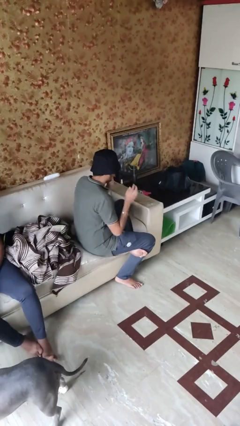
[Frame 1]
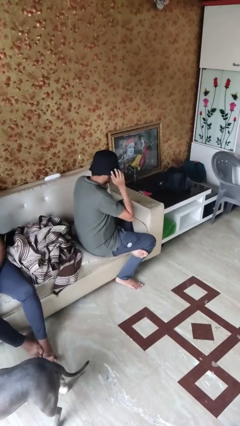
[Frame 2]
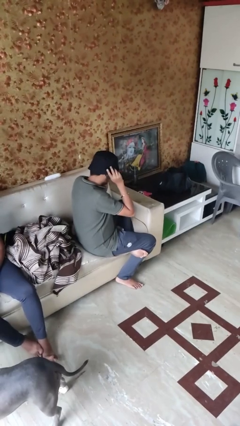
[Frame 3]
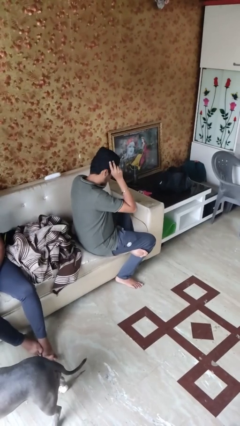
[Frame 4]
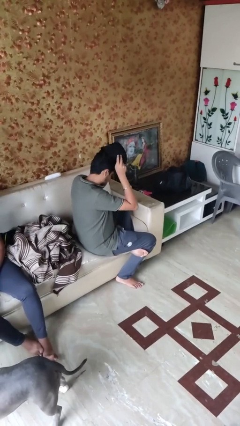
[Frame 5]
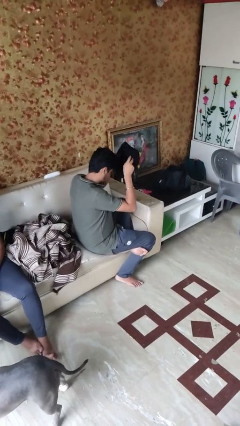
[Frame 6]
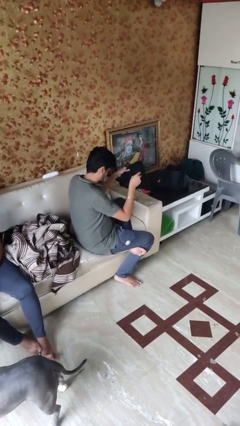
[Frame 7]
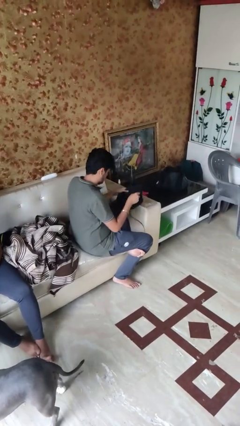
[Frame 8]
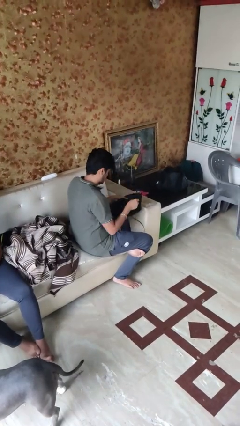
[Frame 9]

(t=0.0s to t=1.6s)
person takes off hat

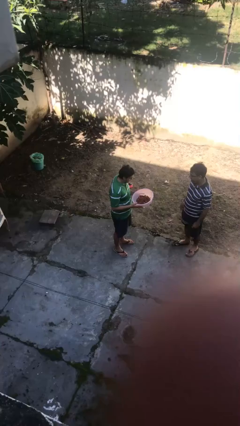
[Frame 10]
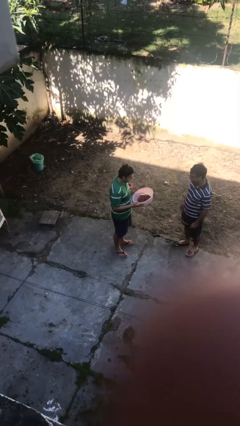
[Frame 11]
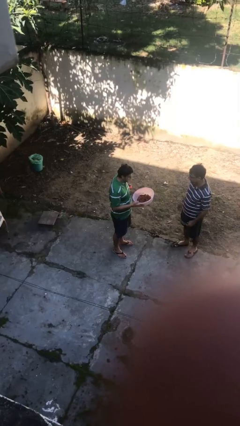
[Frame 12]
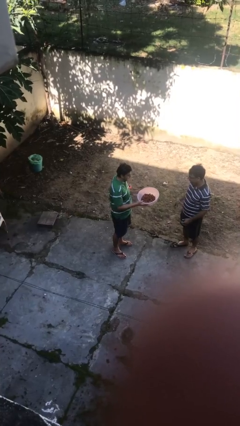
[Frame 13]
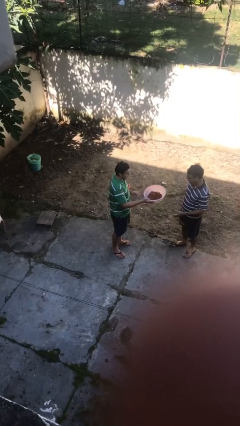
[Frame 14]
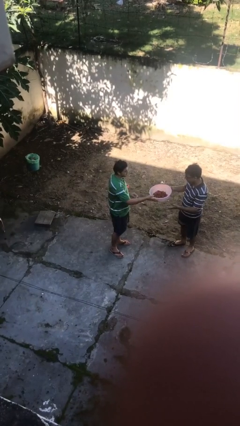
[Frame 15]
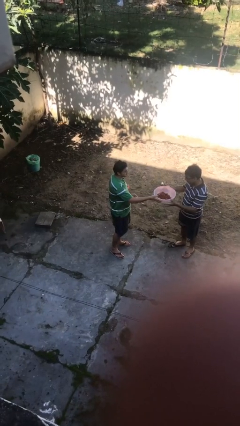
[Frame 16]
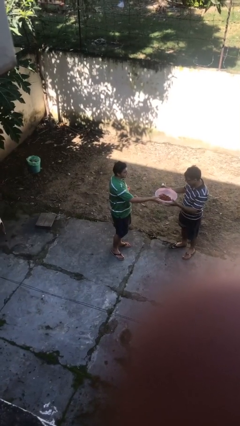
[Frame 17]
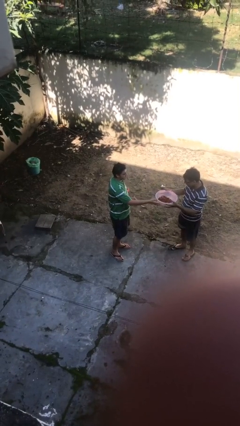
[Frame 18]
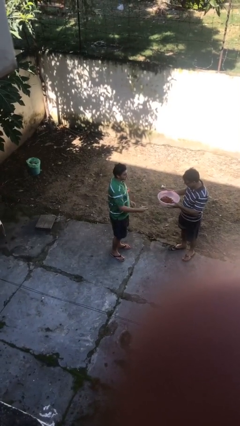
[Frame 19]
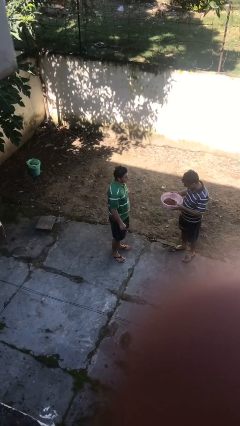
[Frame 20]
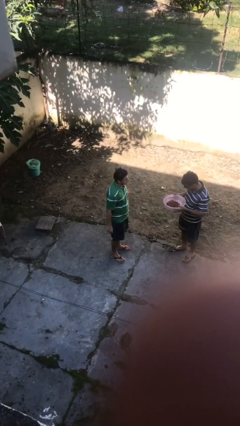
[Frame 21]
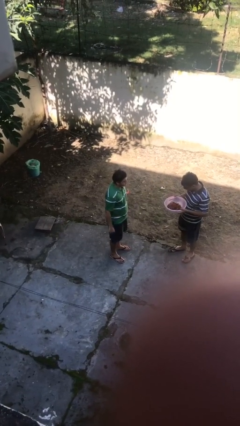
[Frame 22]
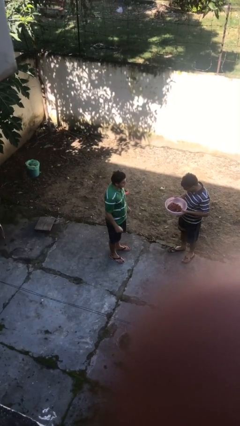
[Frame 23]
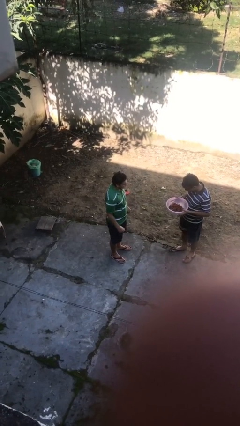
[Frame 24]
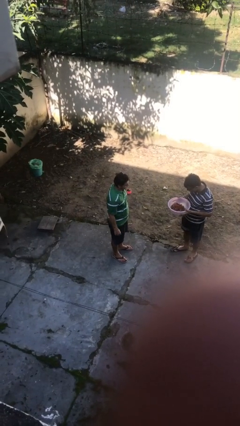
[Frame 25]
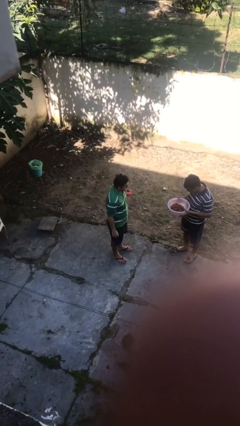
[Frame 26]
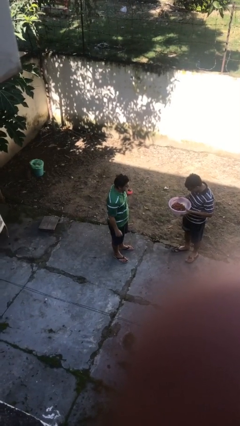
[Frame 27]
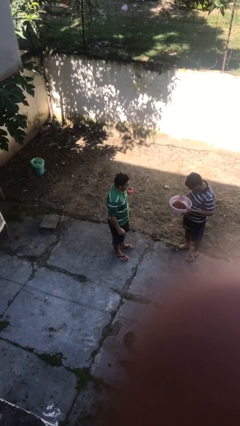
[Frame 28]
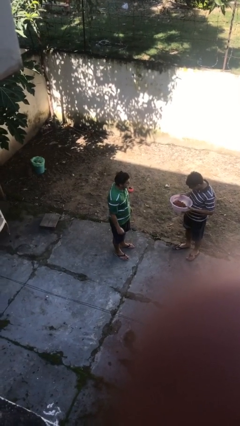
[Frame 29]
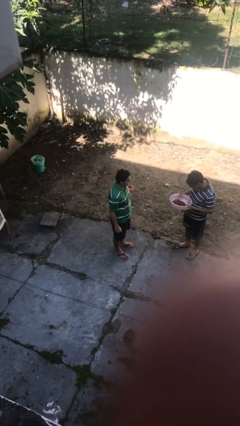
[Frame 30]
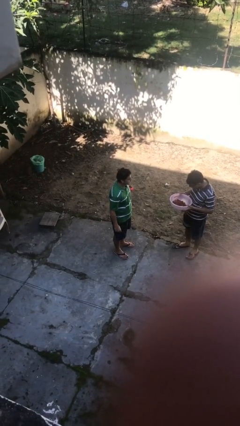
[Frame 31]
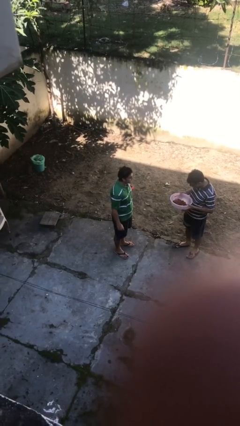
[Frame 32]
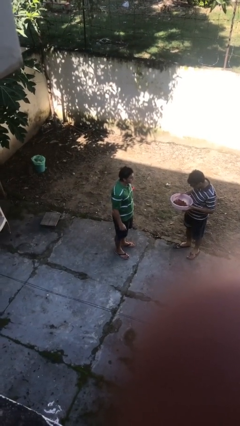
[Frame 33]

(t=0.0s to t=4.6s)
person transfers object to person

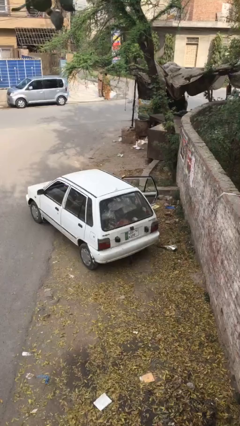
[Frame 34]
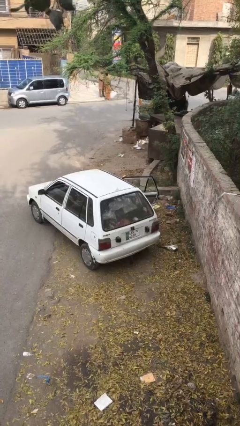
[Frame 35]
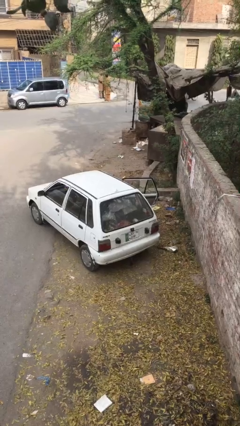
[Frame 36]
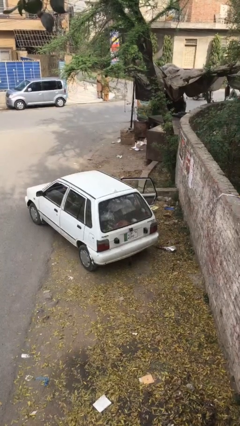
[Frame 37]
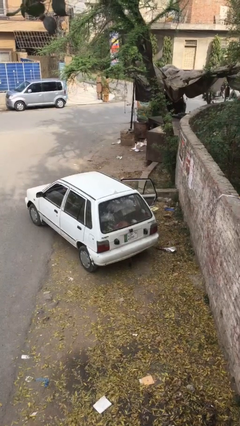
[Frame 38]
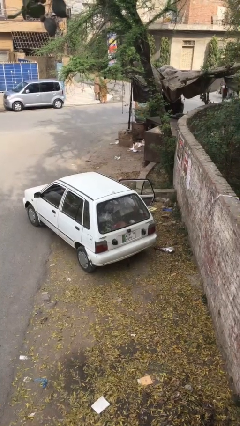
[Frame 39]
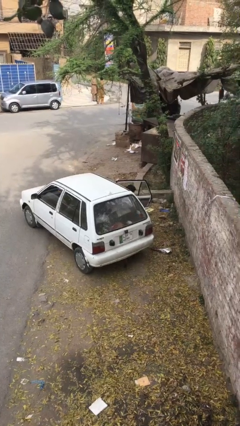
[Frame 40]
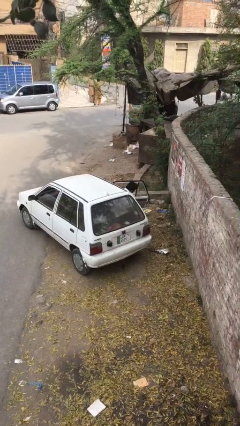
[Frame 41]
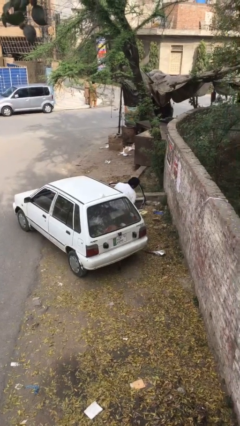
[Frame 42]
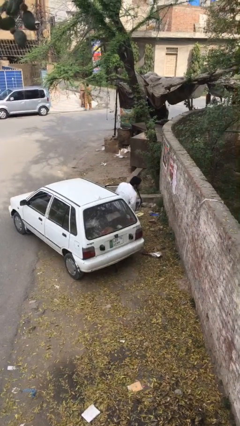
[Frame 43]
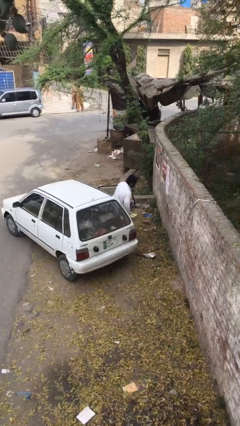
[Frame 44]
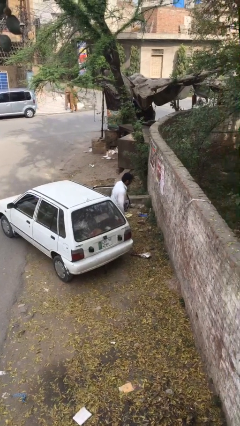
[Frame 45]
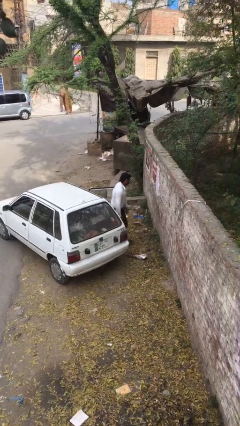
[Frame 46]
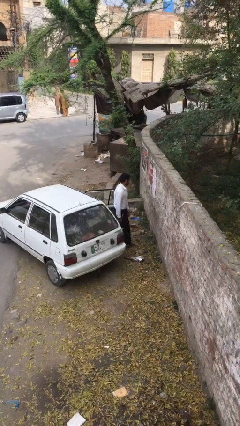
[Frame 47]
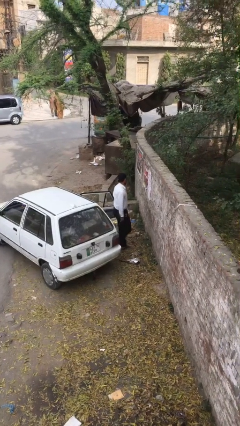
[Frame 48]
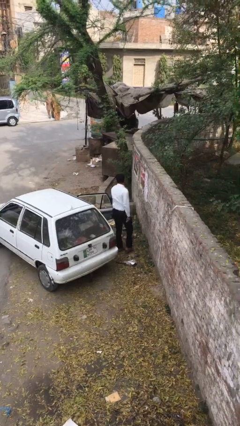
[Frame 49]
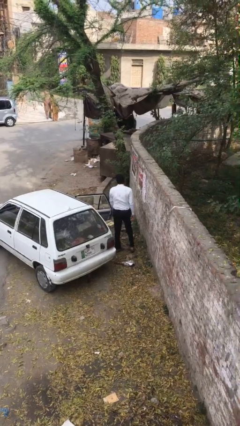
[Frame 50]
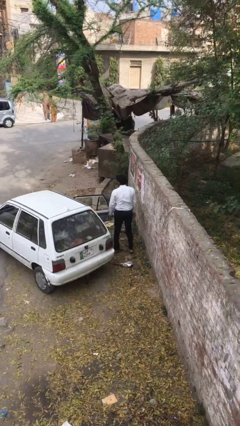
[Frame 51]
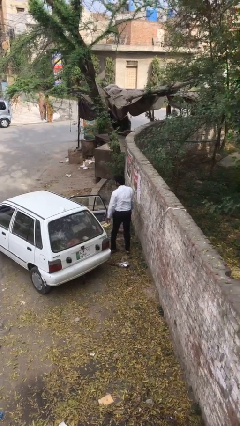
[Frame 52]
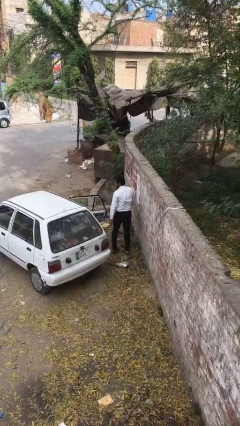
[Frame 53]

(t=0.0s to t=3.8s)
person exits car

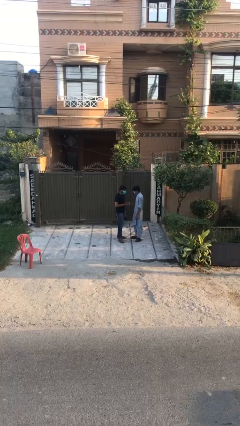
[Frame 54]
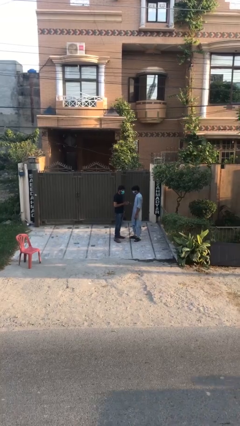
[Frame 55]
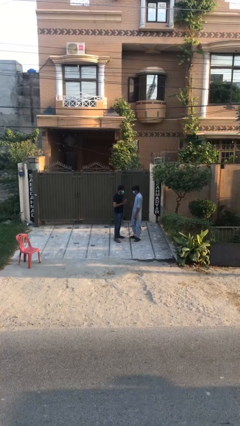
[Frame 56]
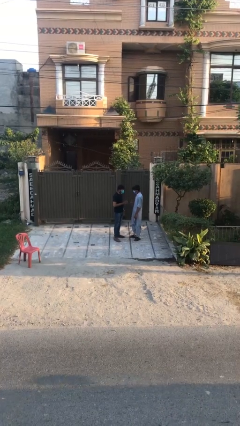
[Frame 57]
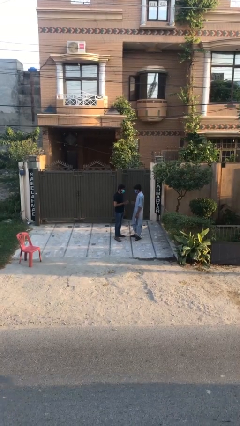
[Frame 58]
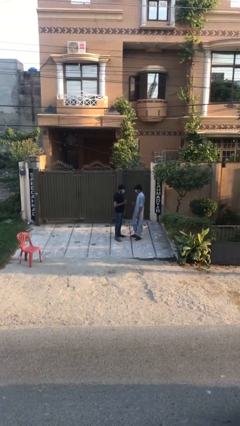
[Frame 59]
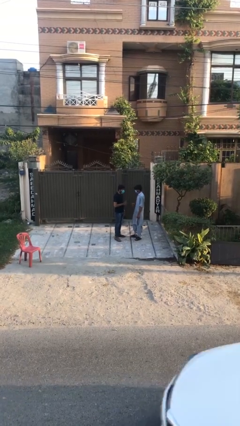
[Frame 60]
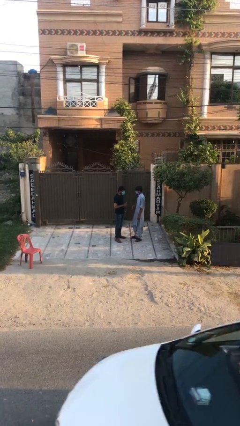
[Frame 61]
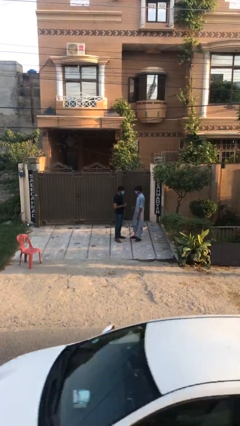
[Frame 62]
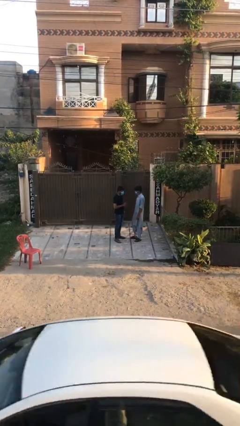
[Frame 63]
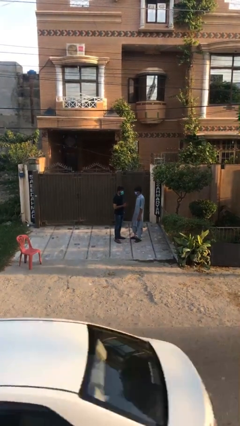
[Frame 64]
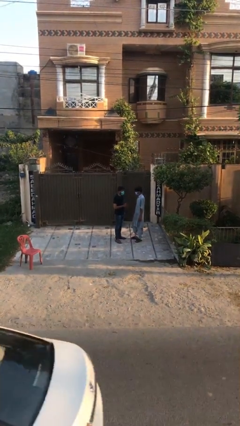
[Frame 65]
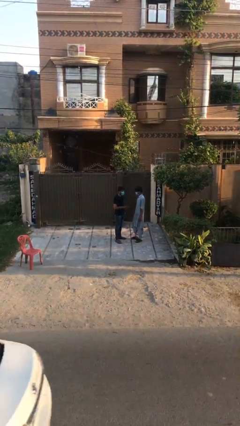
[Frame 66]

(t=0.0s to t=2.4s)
person talks to person

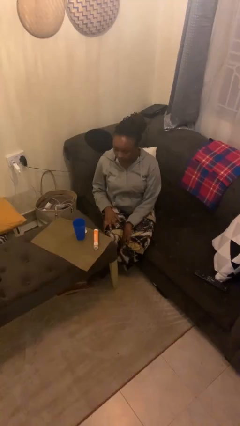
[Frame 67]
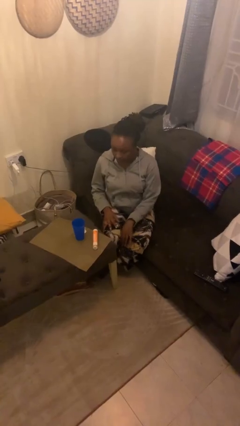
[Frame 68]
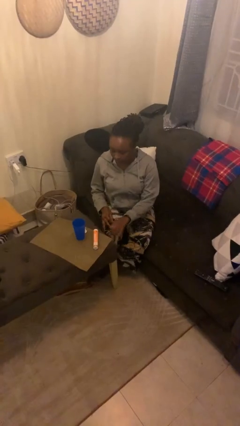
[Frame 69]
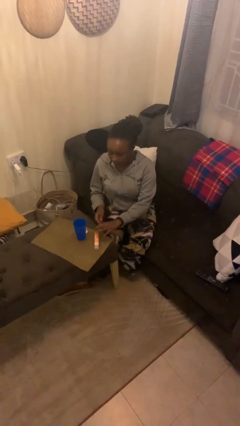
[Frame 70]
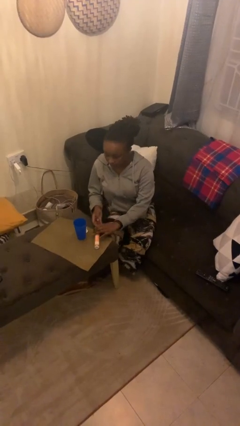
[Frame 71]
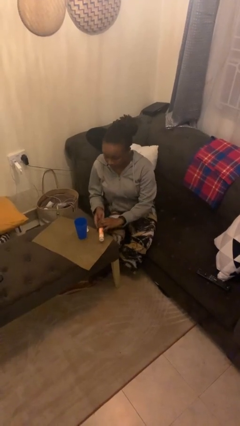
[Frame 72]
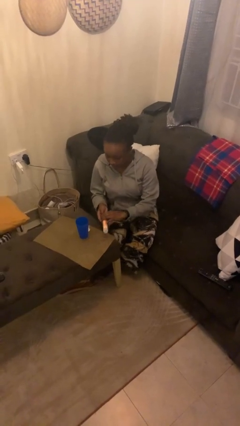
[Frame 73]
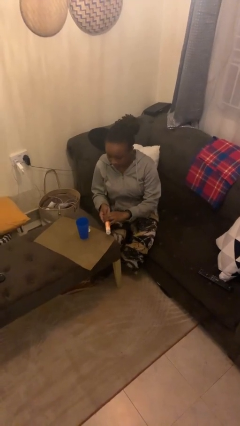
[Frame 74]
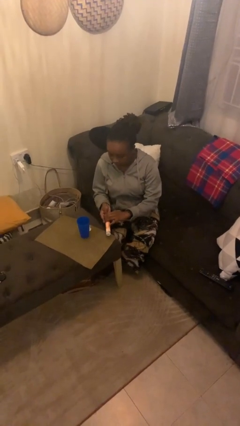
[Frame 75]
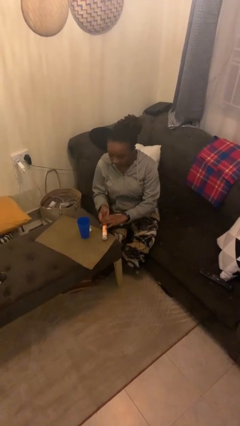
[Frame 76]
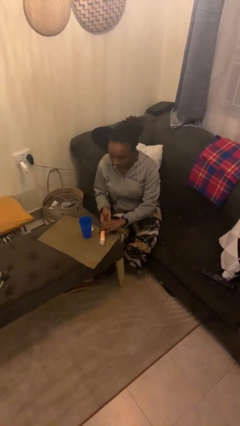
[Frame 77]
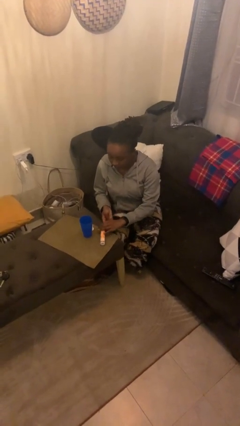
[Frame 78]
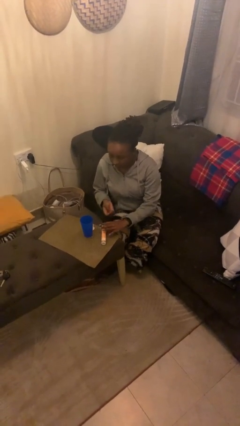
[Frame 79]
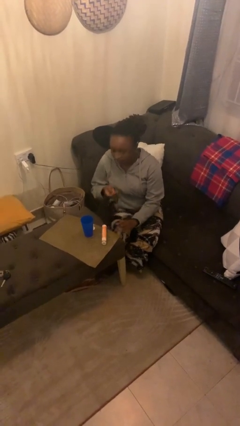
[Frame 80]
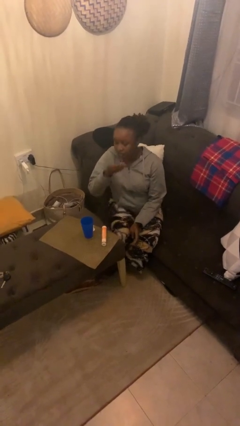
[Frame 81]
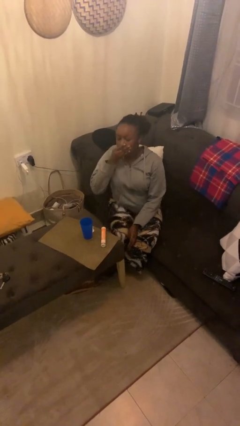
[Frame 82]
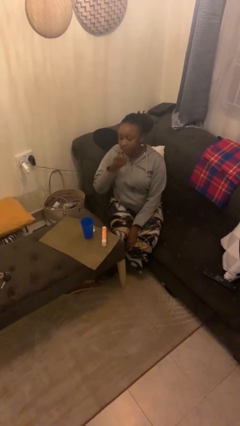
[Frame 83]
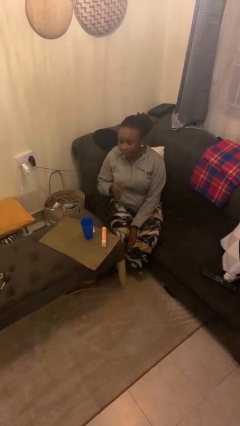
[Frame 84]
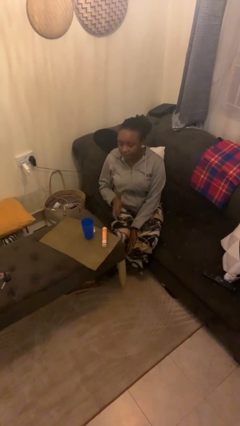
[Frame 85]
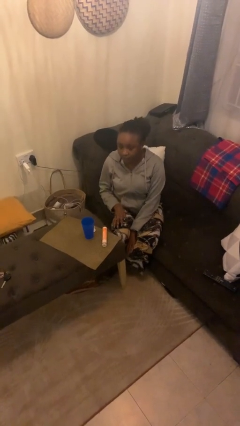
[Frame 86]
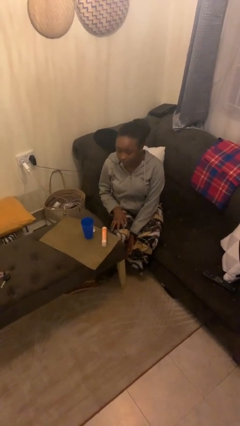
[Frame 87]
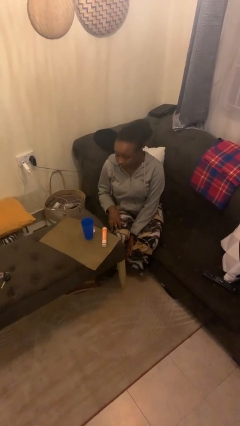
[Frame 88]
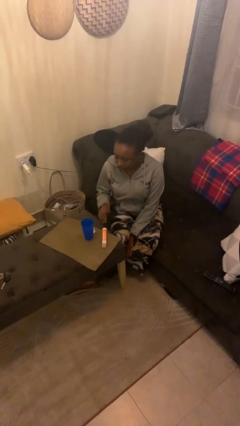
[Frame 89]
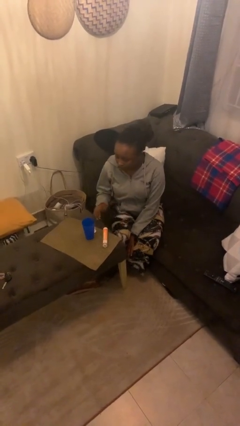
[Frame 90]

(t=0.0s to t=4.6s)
person takes medicine pills

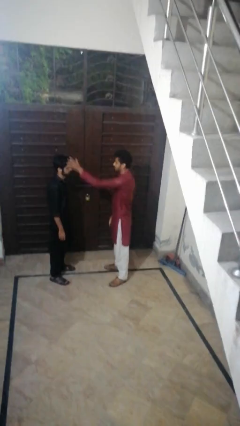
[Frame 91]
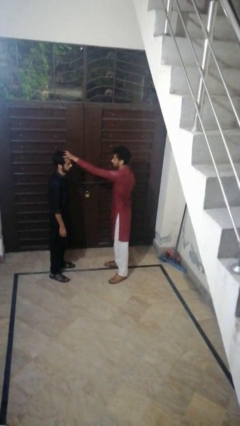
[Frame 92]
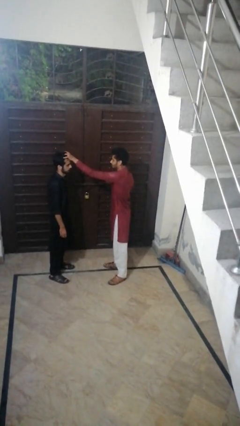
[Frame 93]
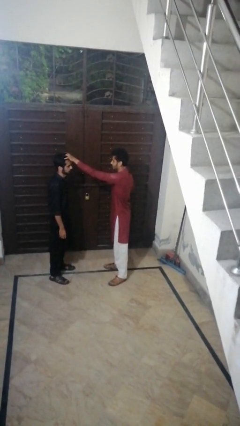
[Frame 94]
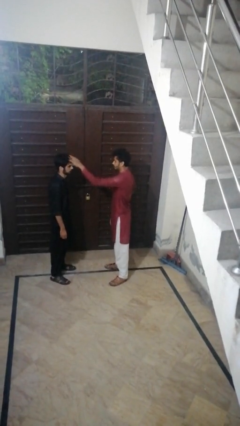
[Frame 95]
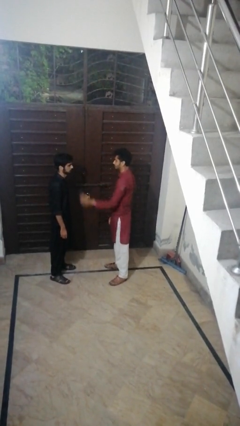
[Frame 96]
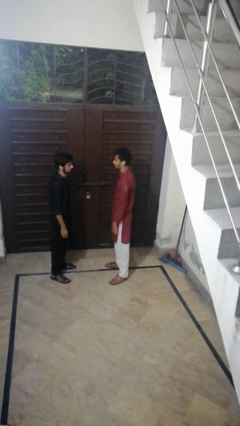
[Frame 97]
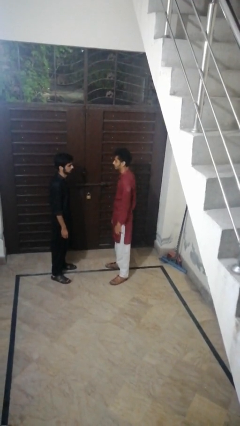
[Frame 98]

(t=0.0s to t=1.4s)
person grabs person by hair
